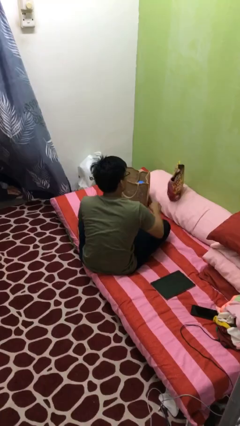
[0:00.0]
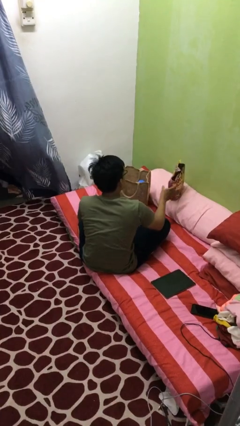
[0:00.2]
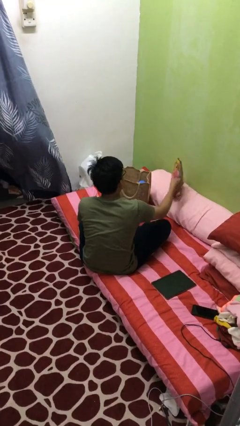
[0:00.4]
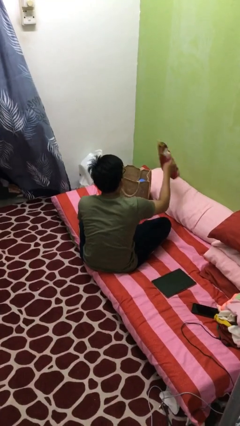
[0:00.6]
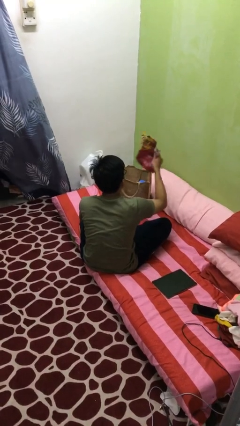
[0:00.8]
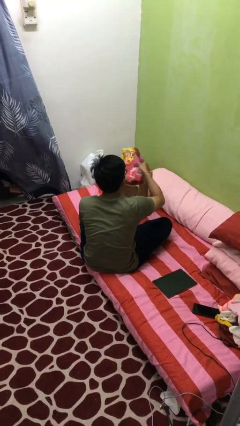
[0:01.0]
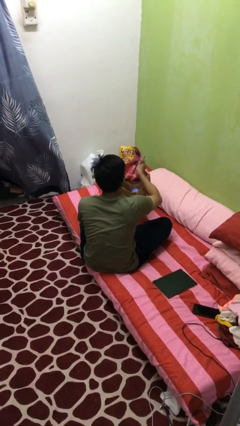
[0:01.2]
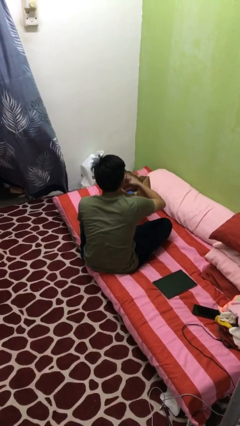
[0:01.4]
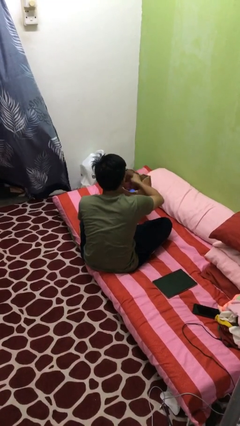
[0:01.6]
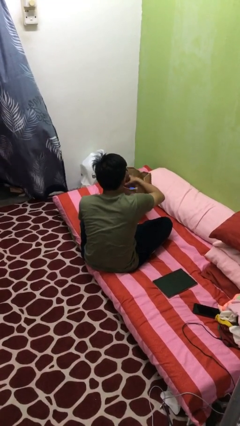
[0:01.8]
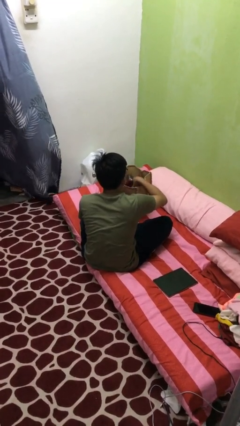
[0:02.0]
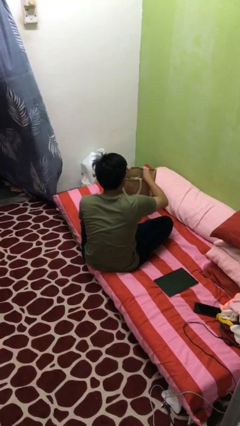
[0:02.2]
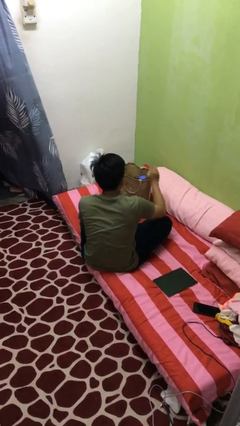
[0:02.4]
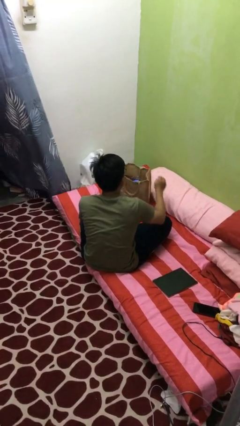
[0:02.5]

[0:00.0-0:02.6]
person puts object into bag

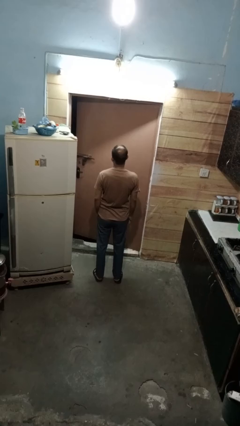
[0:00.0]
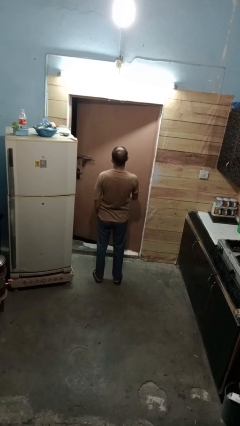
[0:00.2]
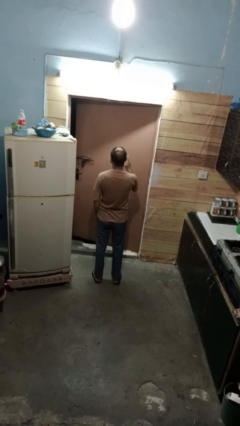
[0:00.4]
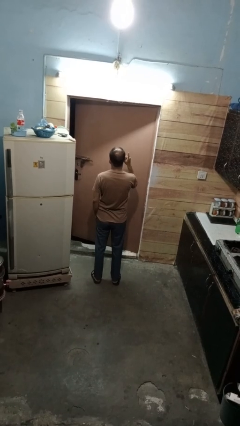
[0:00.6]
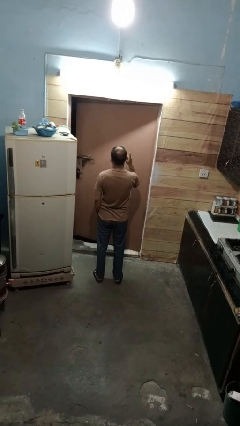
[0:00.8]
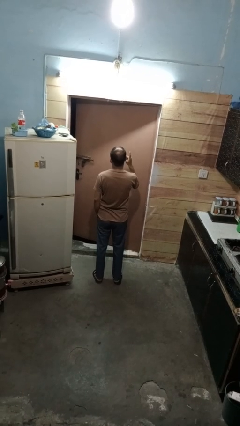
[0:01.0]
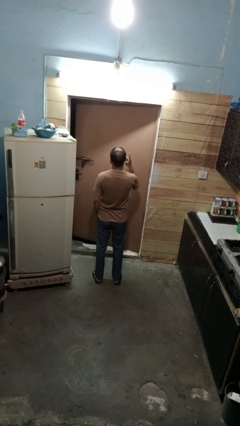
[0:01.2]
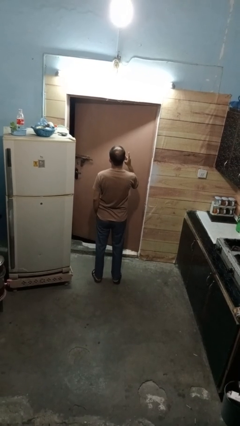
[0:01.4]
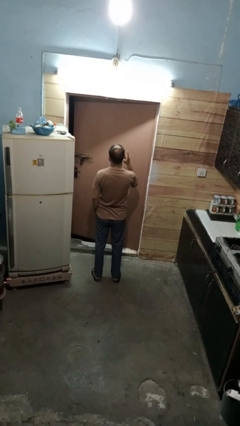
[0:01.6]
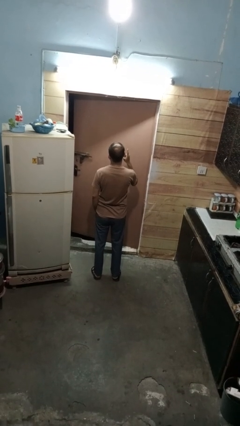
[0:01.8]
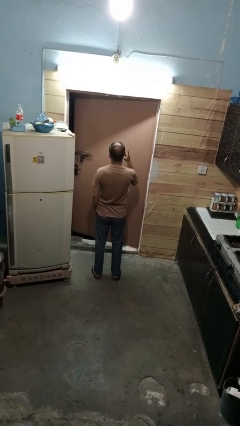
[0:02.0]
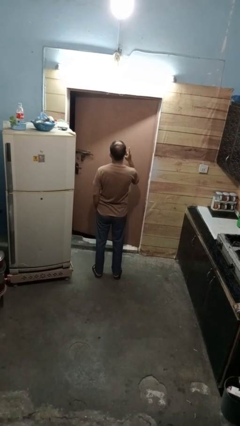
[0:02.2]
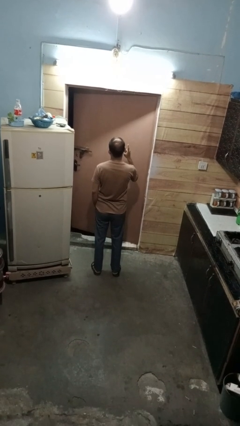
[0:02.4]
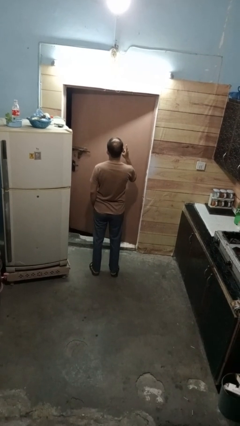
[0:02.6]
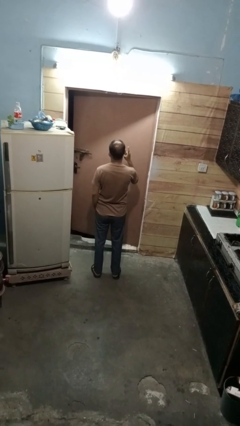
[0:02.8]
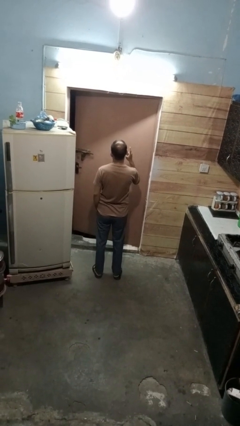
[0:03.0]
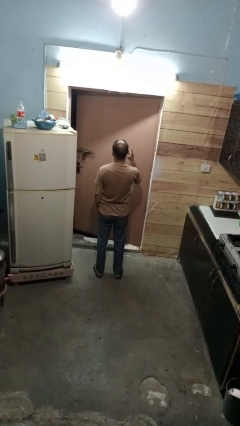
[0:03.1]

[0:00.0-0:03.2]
person gestures number one

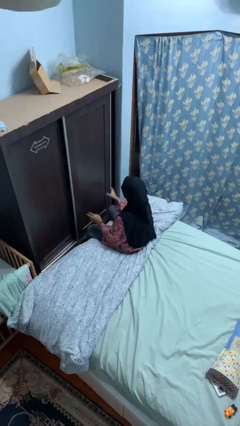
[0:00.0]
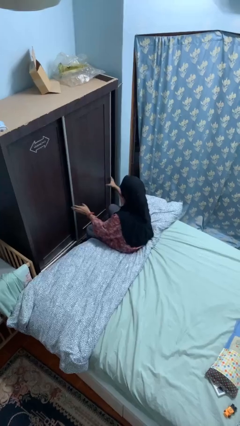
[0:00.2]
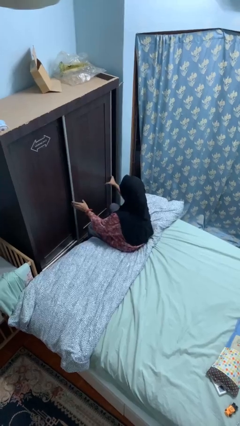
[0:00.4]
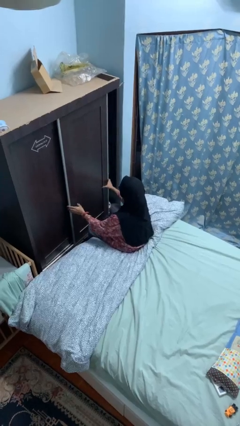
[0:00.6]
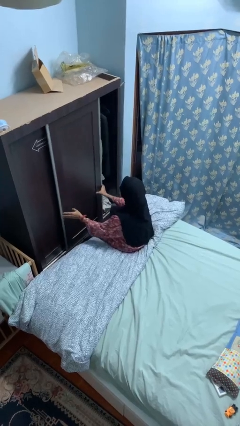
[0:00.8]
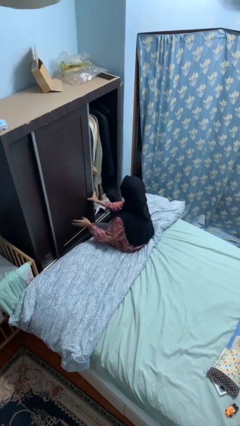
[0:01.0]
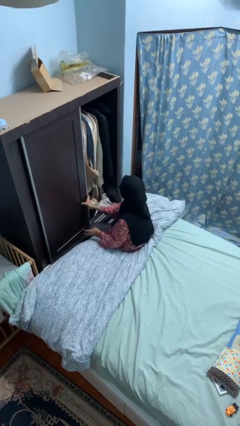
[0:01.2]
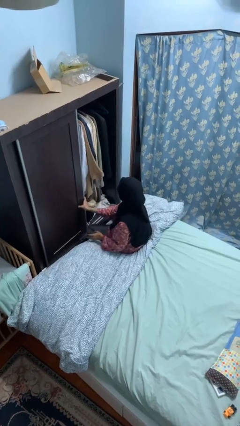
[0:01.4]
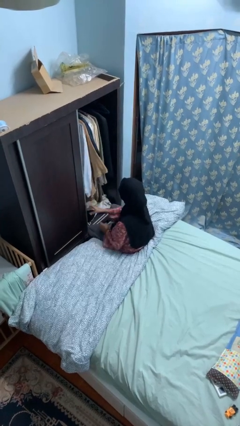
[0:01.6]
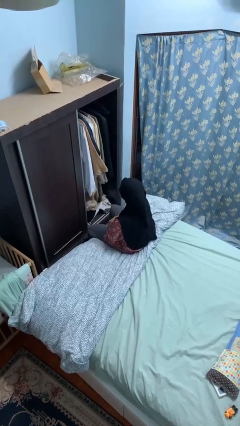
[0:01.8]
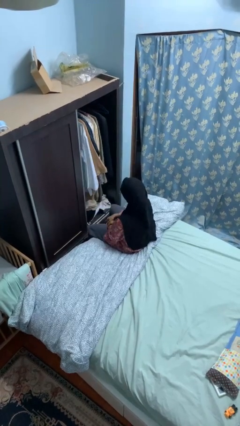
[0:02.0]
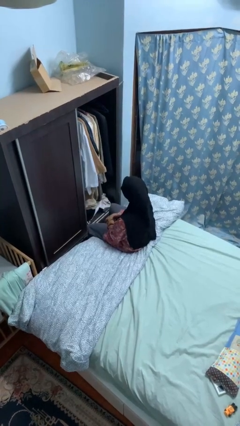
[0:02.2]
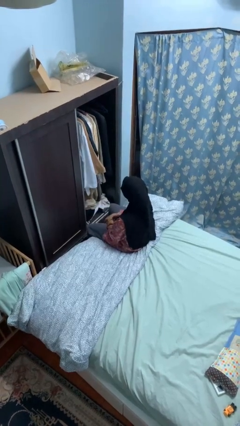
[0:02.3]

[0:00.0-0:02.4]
person opens closet door

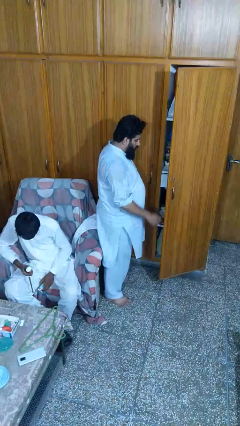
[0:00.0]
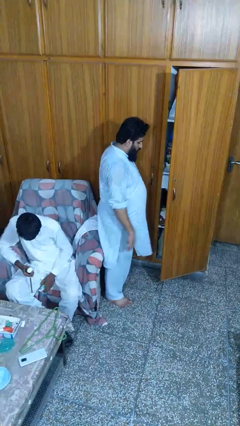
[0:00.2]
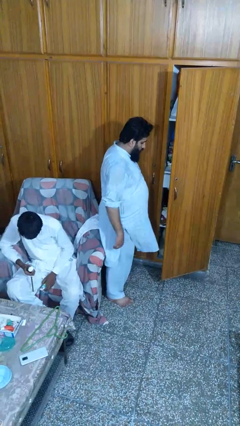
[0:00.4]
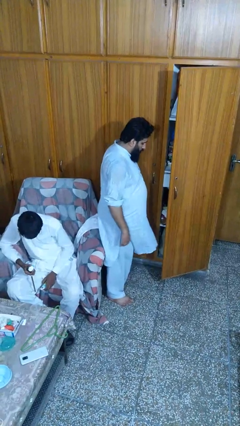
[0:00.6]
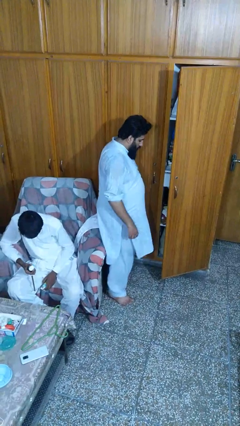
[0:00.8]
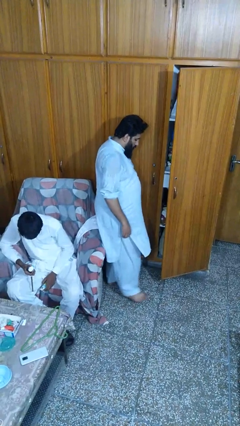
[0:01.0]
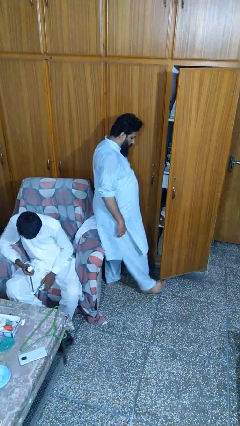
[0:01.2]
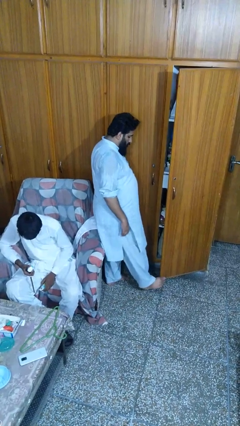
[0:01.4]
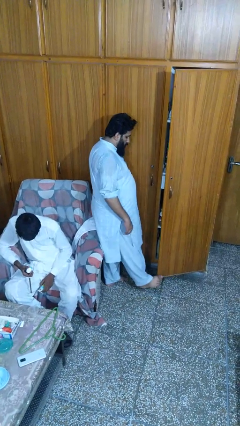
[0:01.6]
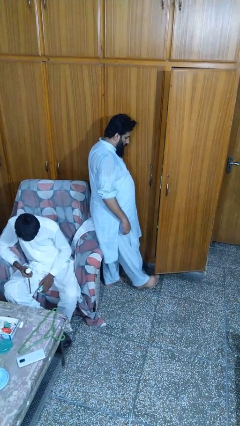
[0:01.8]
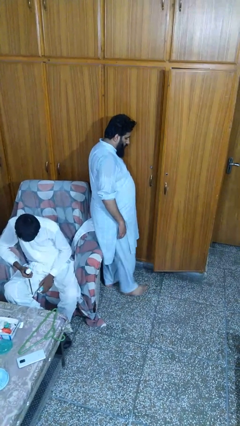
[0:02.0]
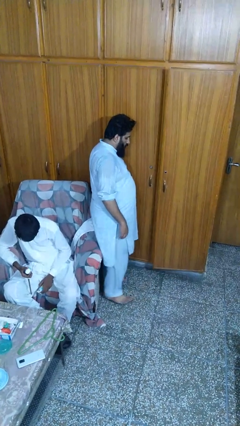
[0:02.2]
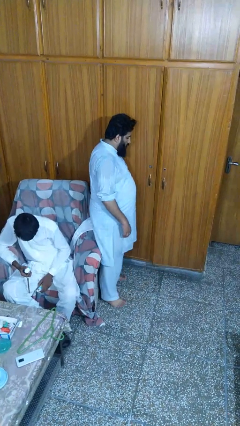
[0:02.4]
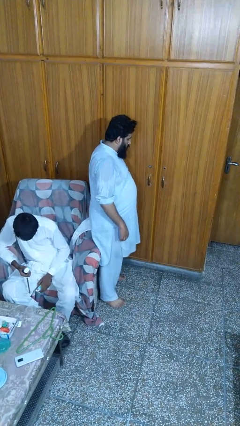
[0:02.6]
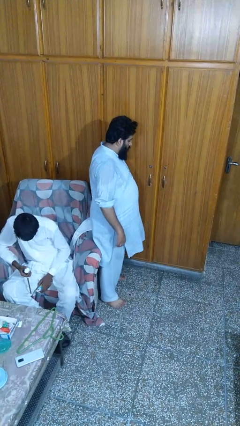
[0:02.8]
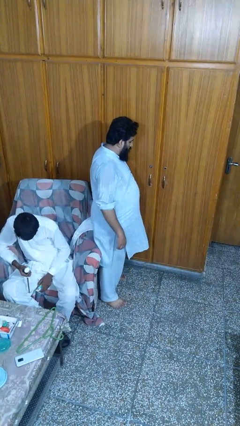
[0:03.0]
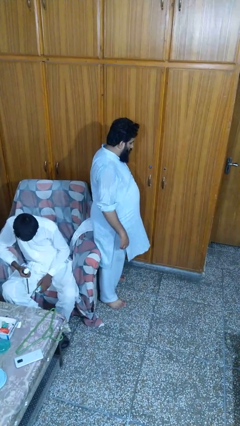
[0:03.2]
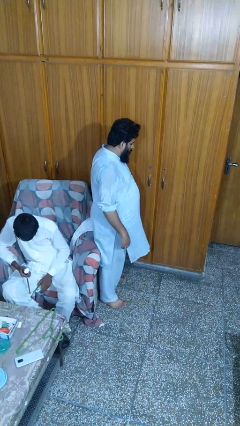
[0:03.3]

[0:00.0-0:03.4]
person closes door with foot

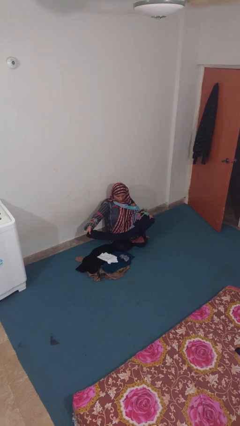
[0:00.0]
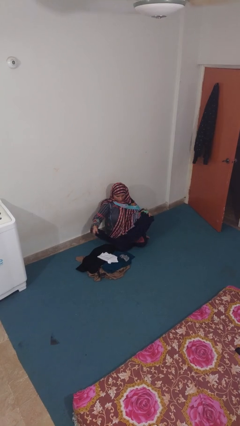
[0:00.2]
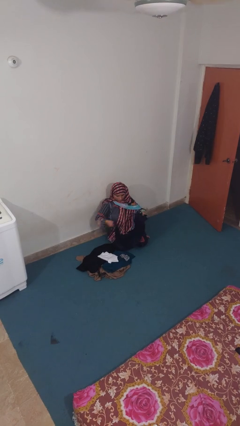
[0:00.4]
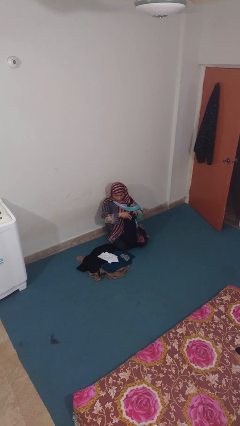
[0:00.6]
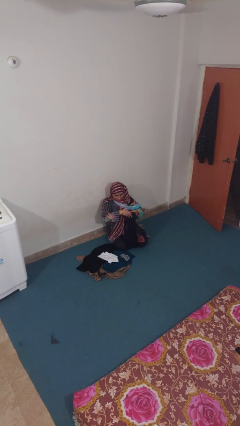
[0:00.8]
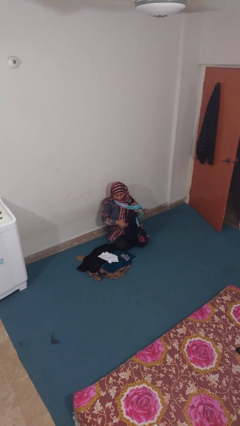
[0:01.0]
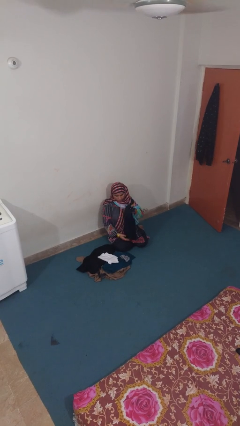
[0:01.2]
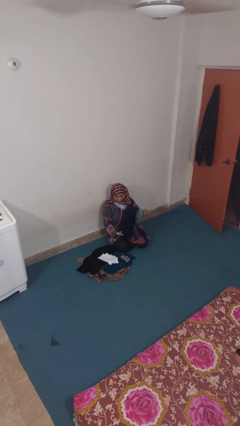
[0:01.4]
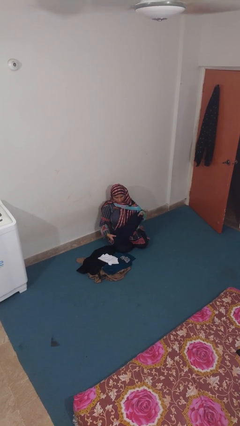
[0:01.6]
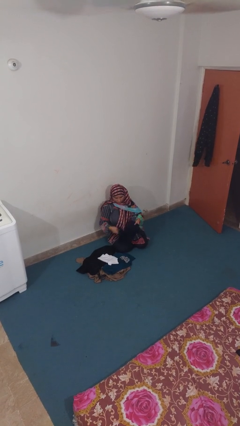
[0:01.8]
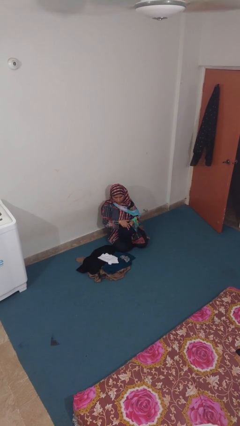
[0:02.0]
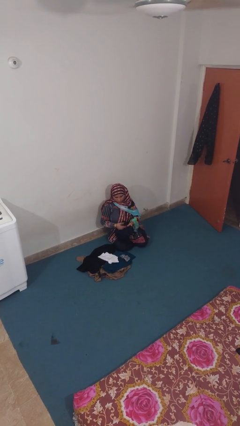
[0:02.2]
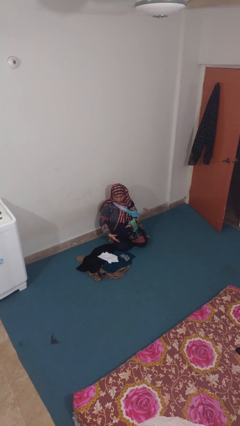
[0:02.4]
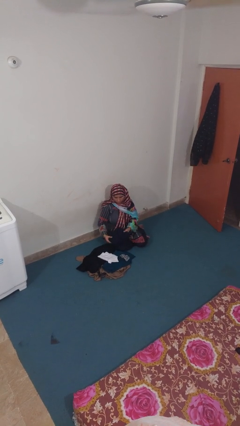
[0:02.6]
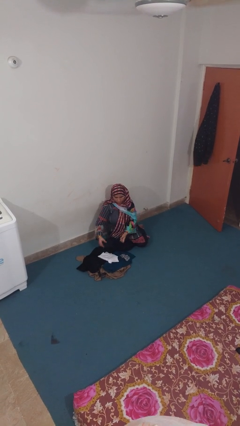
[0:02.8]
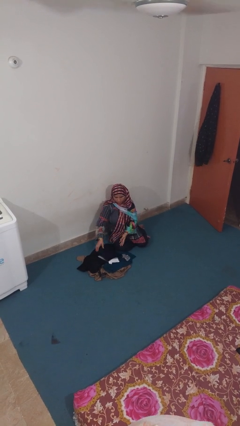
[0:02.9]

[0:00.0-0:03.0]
person folds pants

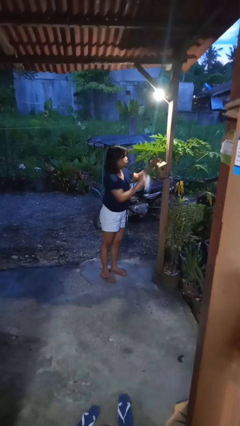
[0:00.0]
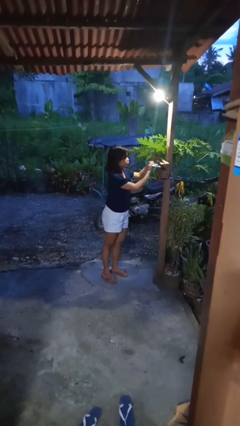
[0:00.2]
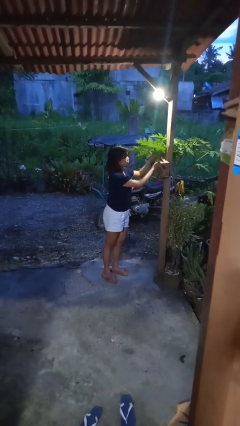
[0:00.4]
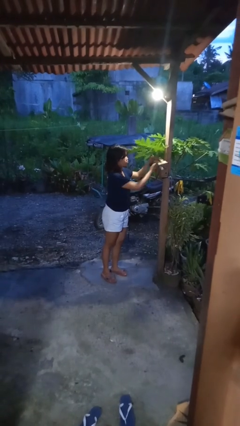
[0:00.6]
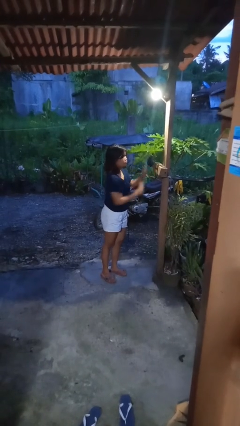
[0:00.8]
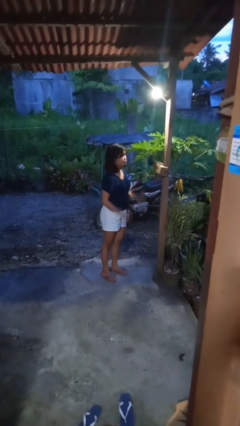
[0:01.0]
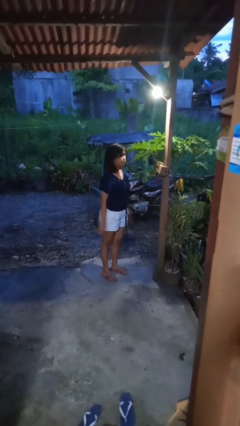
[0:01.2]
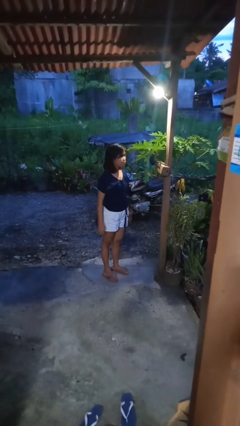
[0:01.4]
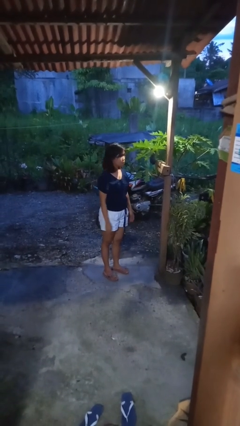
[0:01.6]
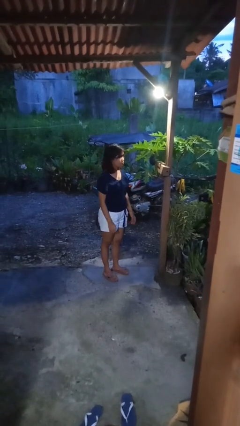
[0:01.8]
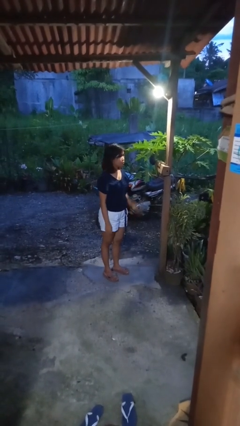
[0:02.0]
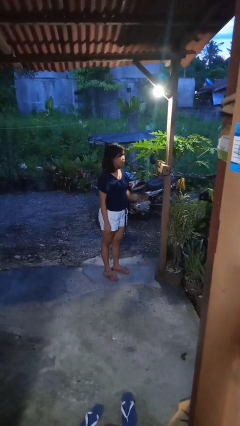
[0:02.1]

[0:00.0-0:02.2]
person puts letters in mailbox

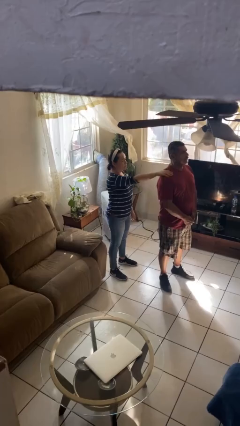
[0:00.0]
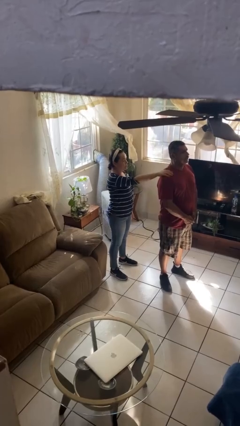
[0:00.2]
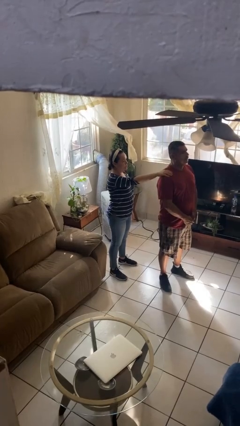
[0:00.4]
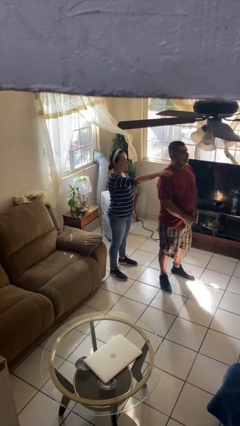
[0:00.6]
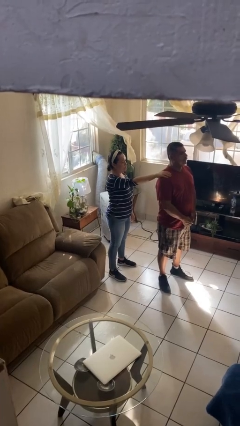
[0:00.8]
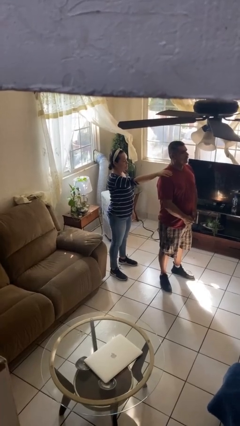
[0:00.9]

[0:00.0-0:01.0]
person grabs person by shoulder
